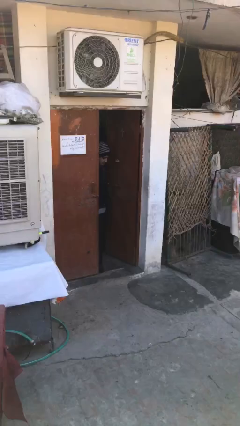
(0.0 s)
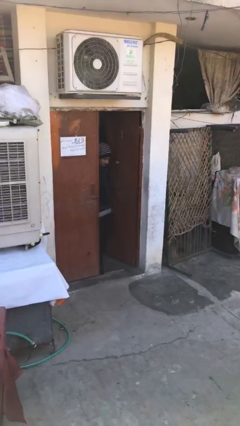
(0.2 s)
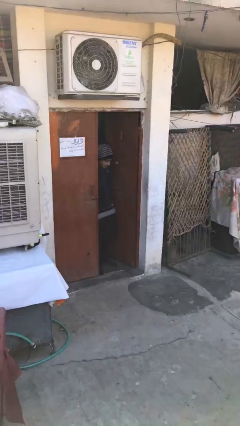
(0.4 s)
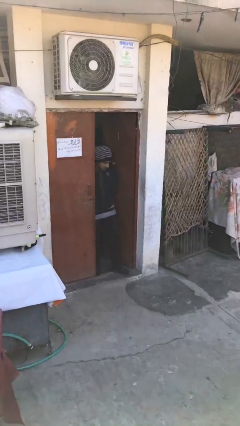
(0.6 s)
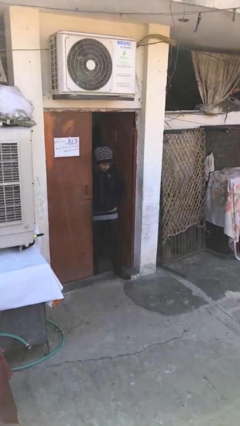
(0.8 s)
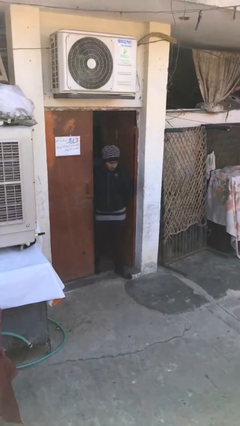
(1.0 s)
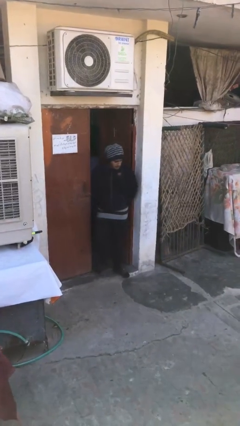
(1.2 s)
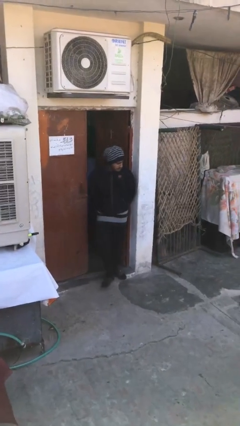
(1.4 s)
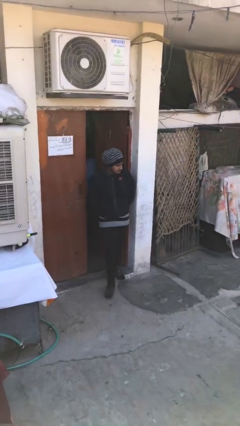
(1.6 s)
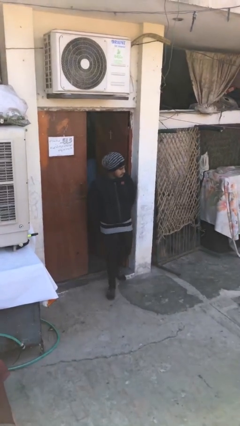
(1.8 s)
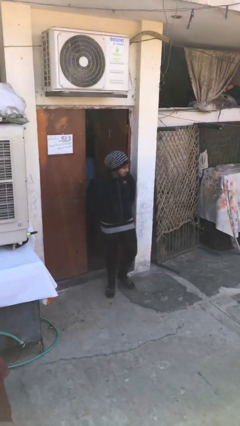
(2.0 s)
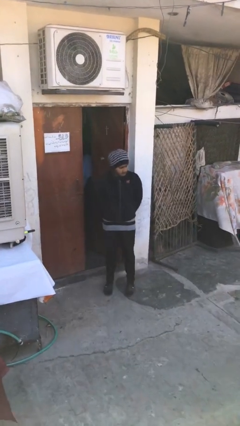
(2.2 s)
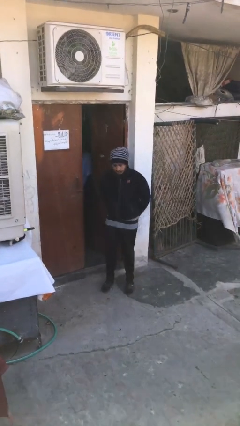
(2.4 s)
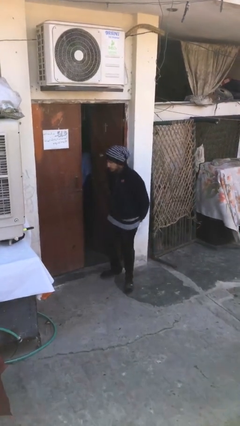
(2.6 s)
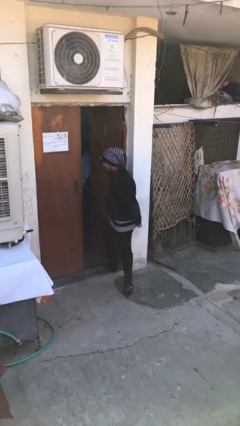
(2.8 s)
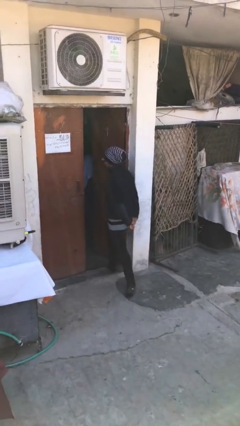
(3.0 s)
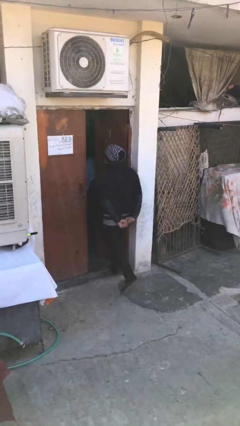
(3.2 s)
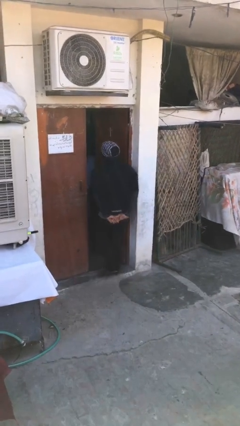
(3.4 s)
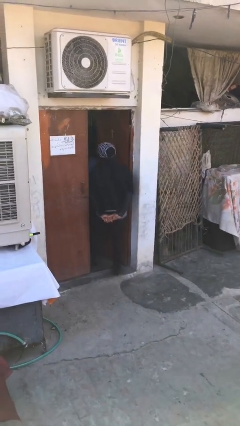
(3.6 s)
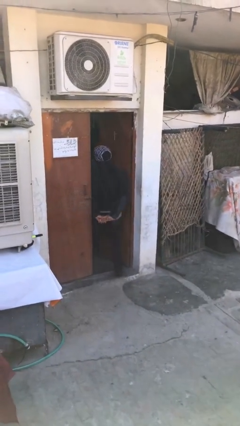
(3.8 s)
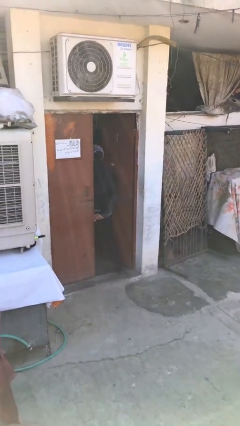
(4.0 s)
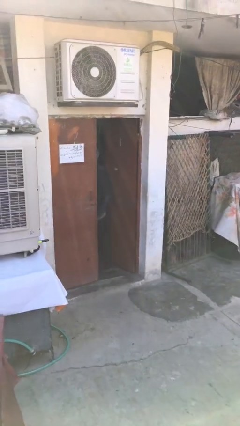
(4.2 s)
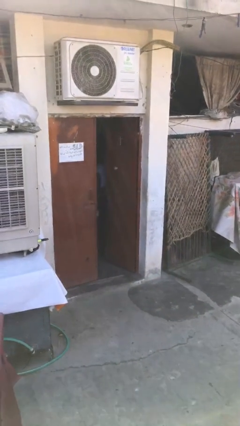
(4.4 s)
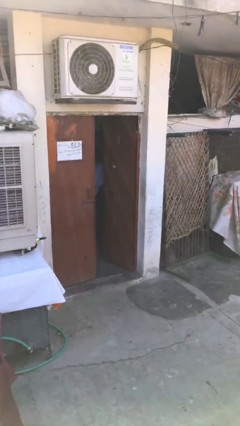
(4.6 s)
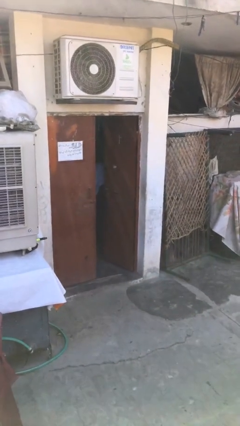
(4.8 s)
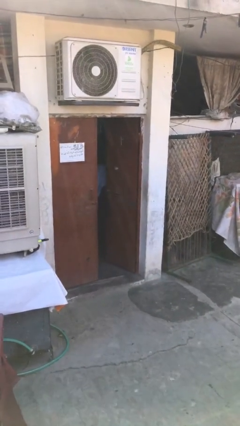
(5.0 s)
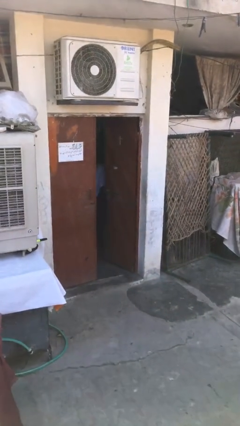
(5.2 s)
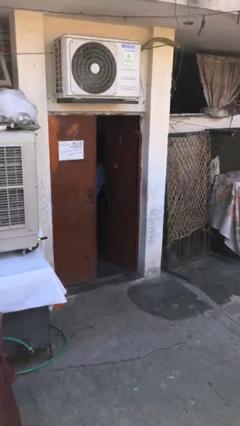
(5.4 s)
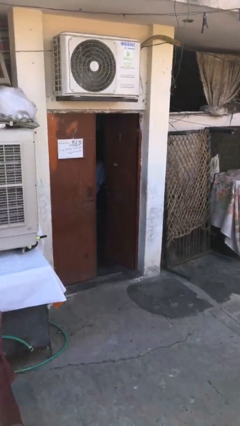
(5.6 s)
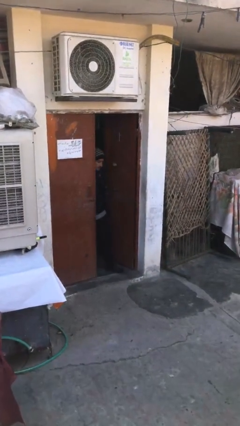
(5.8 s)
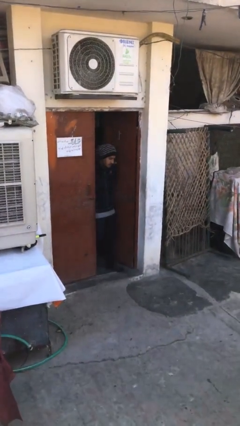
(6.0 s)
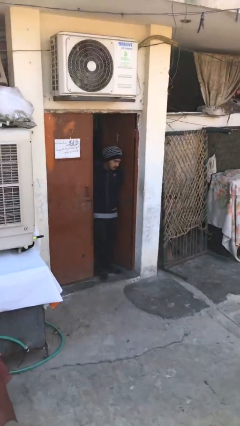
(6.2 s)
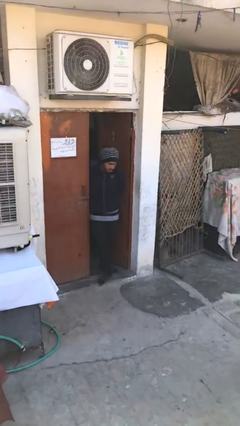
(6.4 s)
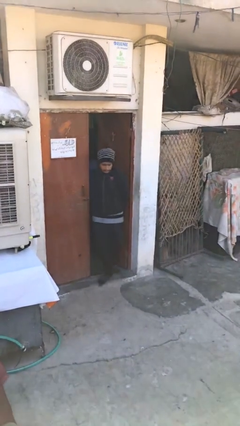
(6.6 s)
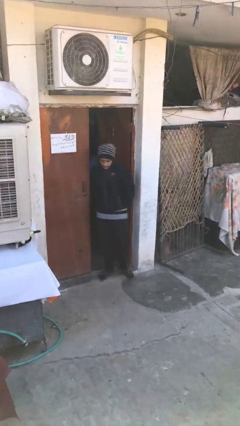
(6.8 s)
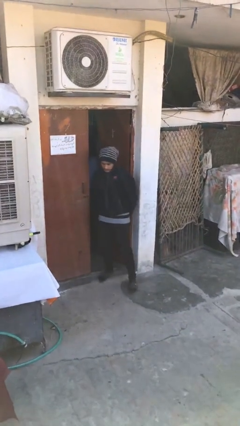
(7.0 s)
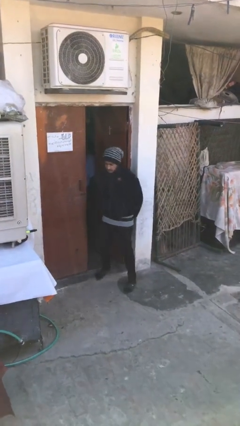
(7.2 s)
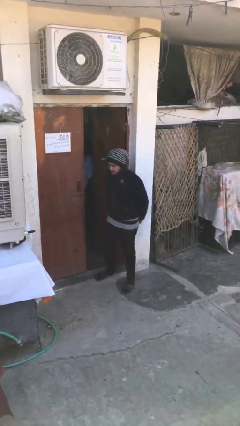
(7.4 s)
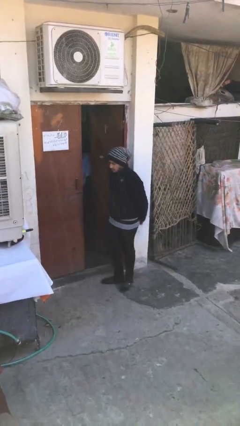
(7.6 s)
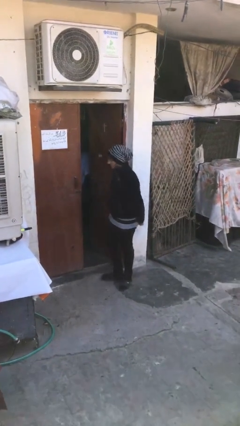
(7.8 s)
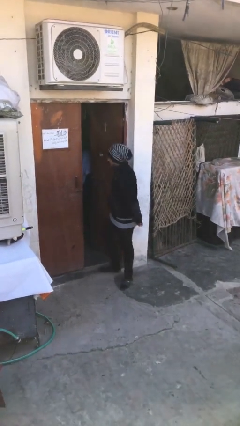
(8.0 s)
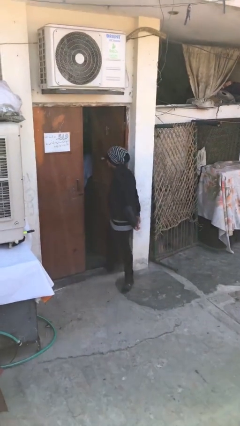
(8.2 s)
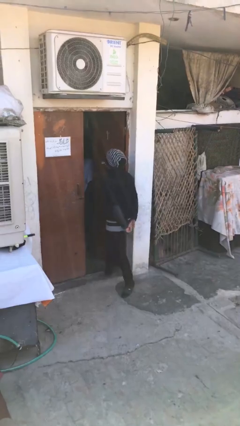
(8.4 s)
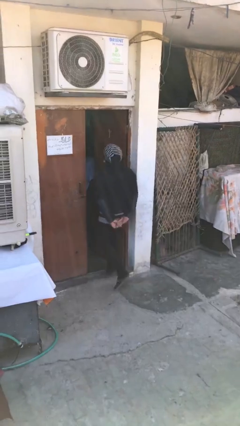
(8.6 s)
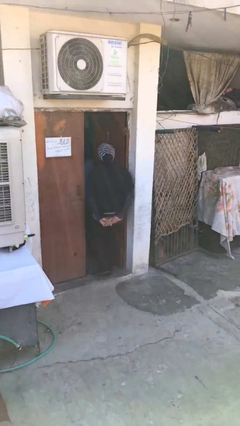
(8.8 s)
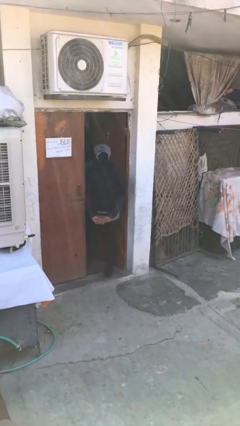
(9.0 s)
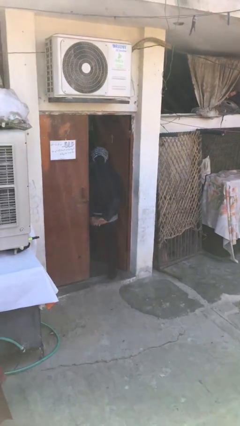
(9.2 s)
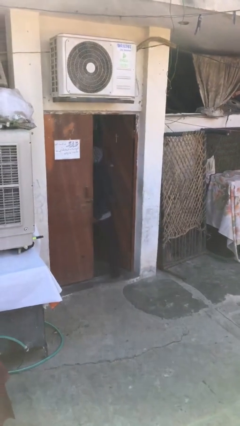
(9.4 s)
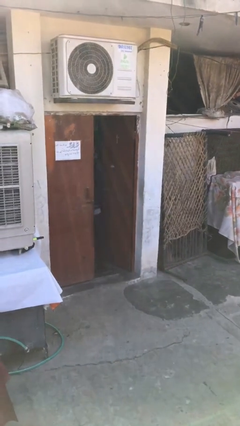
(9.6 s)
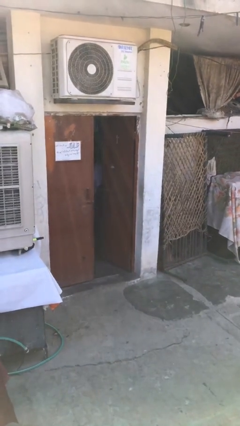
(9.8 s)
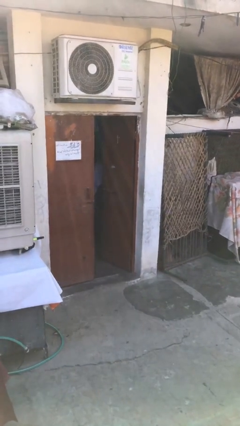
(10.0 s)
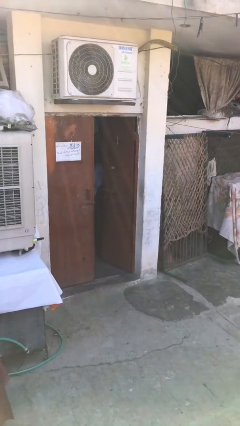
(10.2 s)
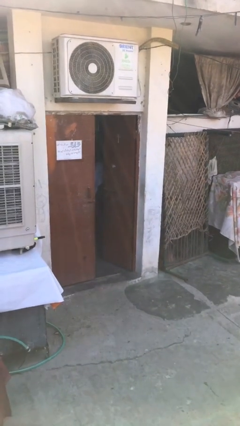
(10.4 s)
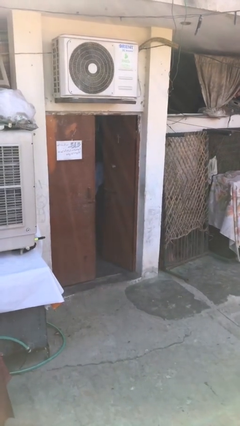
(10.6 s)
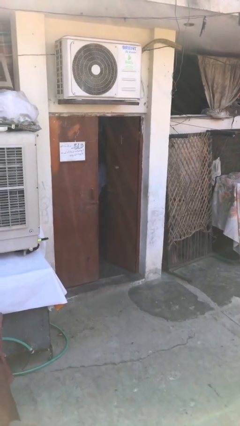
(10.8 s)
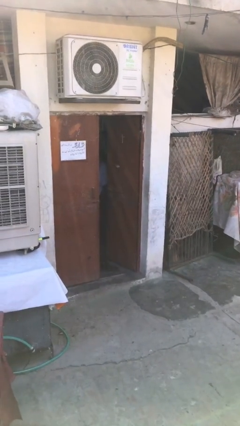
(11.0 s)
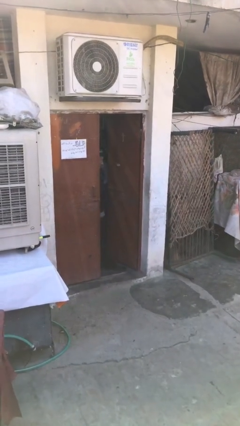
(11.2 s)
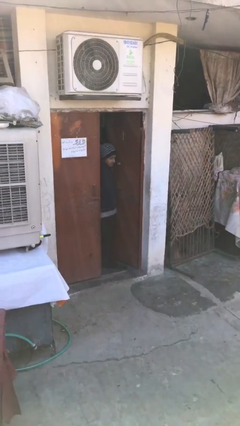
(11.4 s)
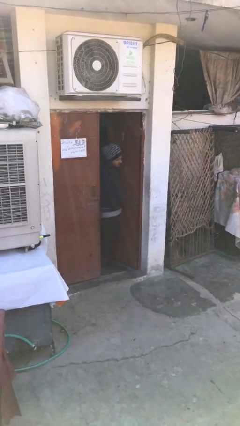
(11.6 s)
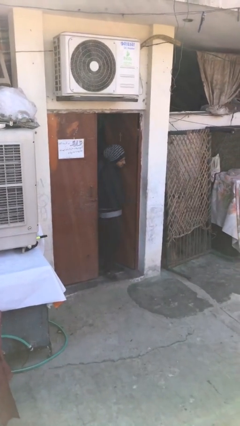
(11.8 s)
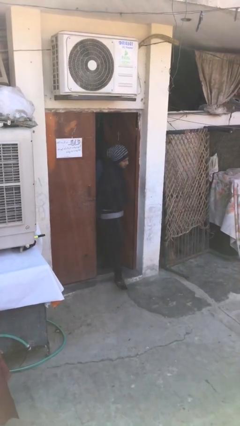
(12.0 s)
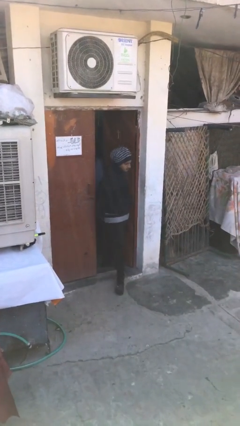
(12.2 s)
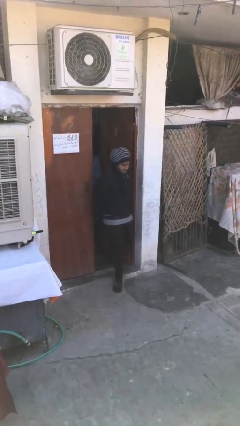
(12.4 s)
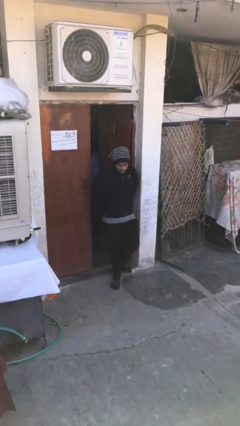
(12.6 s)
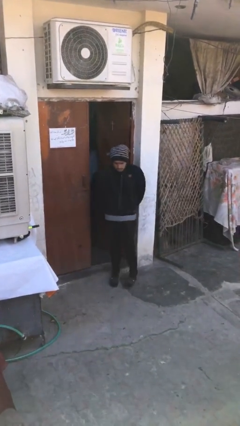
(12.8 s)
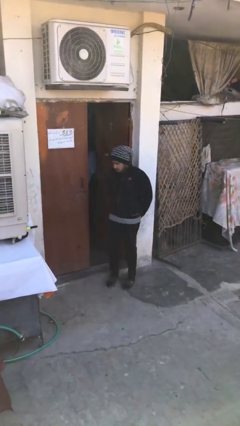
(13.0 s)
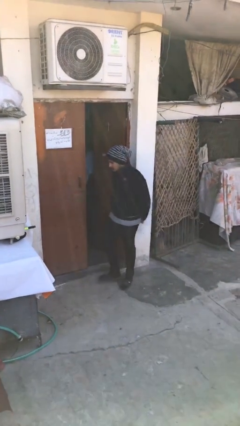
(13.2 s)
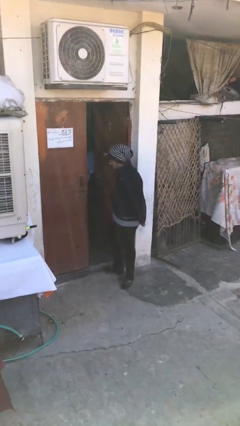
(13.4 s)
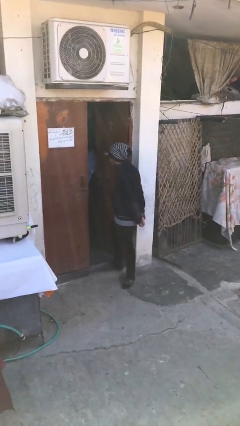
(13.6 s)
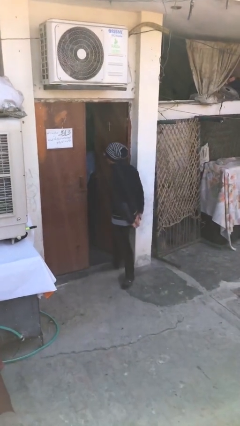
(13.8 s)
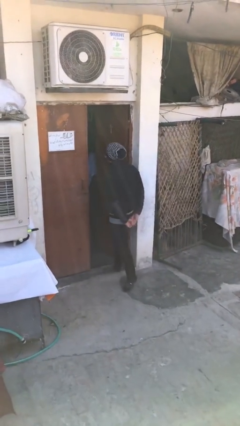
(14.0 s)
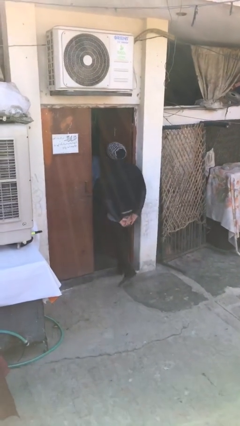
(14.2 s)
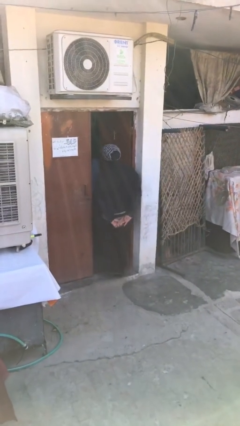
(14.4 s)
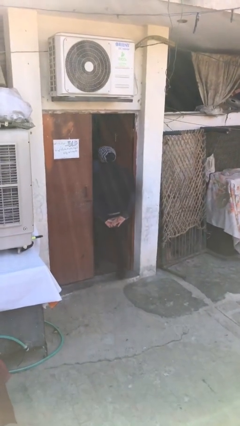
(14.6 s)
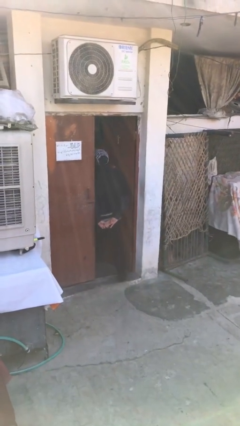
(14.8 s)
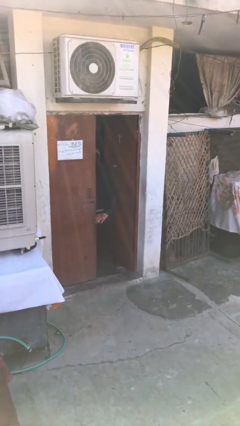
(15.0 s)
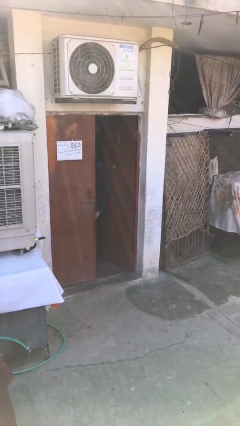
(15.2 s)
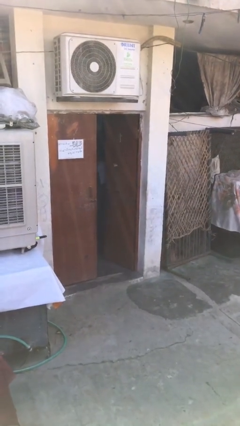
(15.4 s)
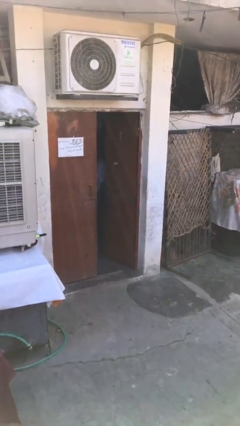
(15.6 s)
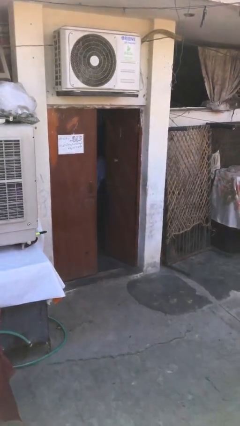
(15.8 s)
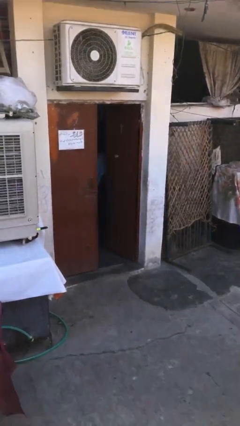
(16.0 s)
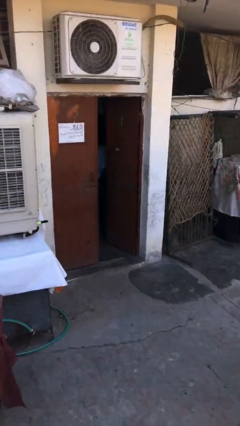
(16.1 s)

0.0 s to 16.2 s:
person texts on phone

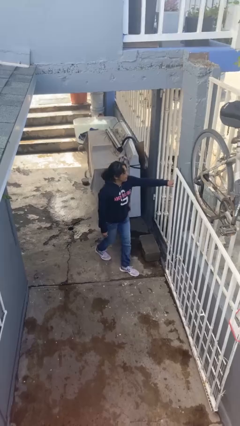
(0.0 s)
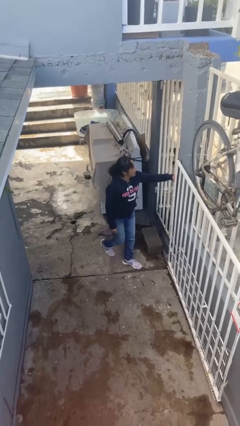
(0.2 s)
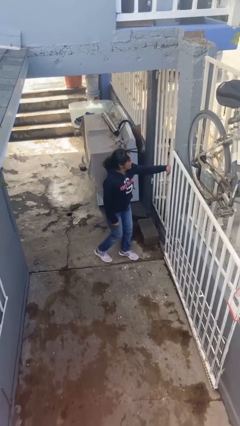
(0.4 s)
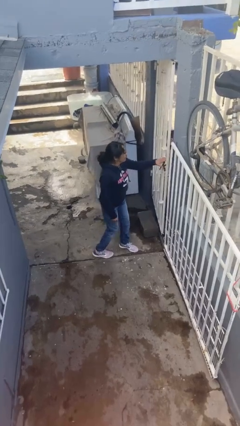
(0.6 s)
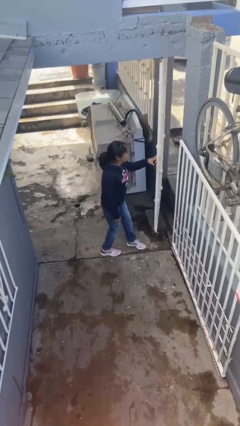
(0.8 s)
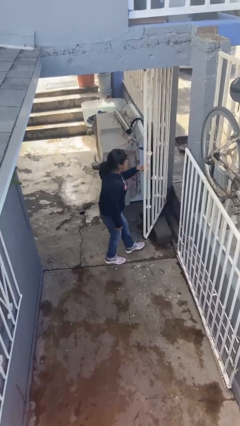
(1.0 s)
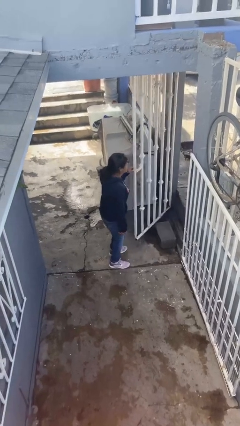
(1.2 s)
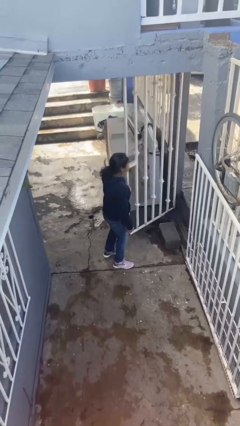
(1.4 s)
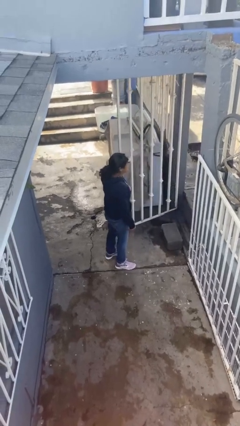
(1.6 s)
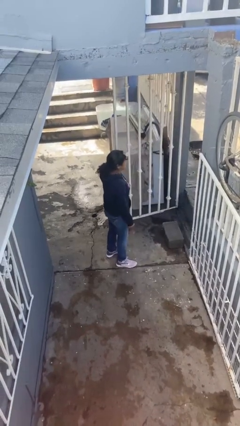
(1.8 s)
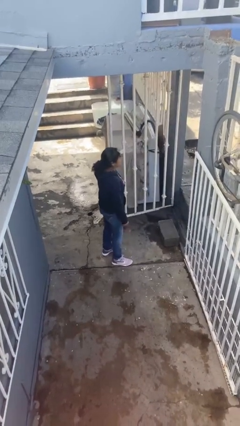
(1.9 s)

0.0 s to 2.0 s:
person opens facility door
